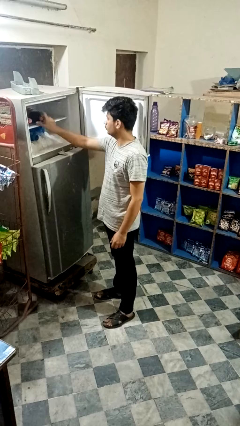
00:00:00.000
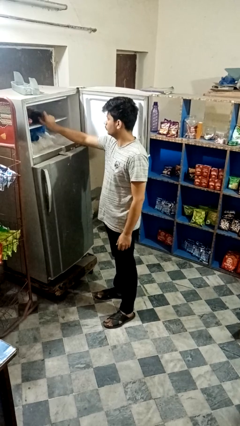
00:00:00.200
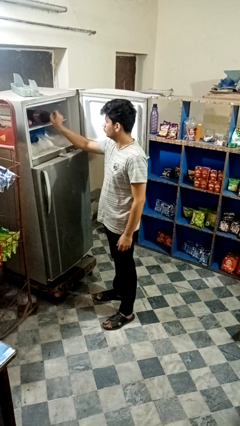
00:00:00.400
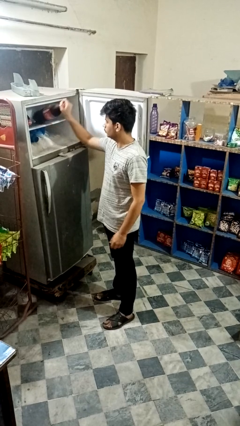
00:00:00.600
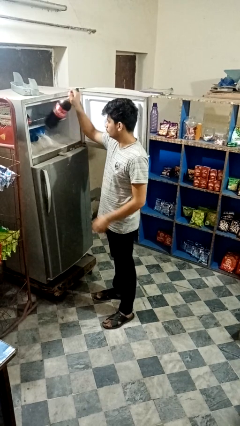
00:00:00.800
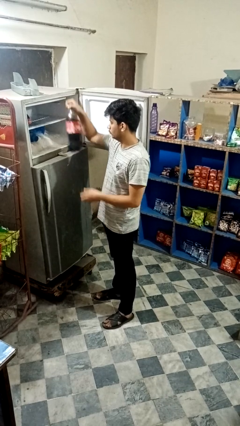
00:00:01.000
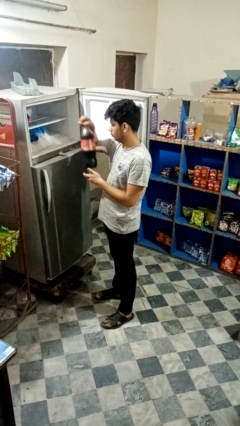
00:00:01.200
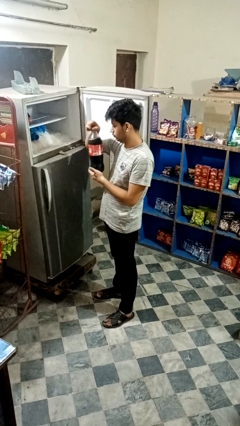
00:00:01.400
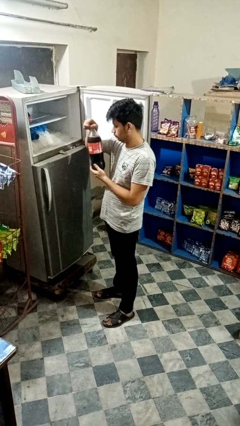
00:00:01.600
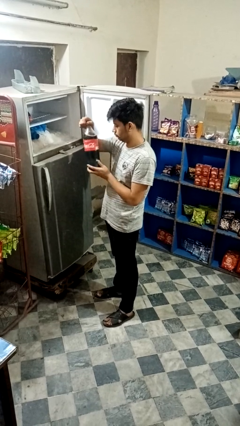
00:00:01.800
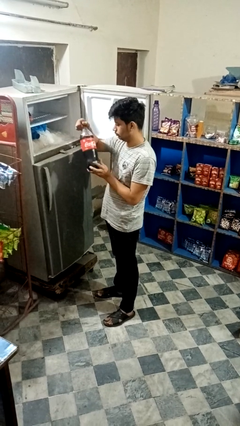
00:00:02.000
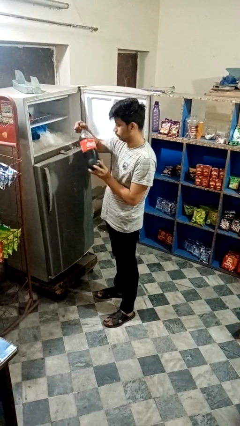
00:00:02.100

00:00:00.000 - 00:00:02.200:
person takes object from refrigerator

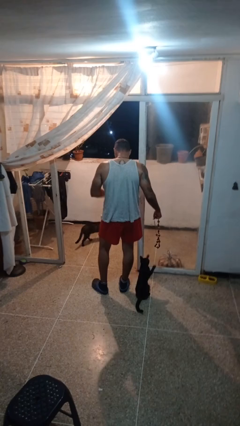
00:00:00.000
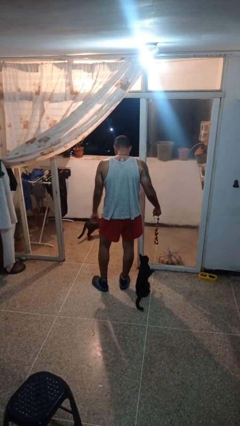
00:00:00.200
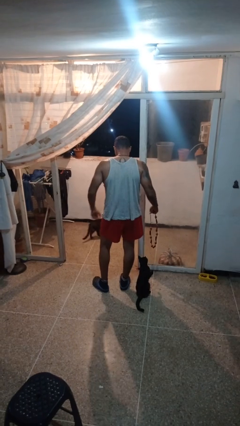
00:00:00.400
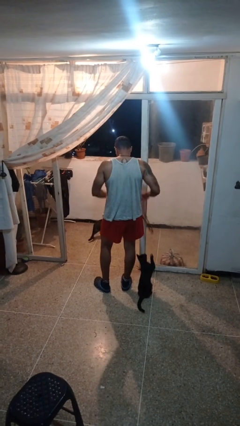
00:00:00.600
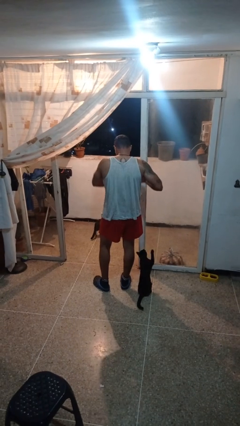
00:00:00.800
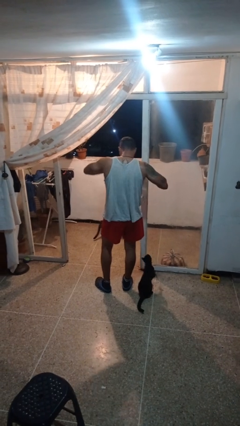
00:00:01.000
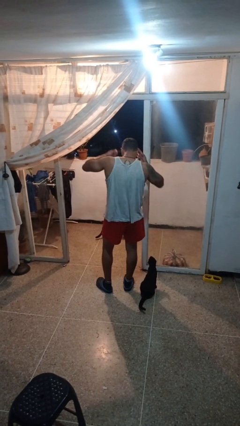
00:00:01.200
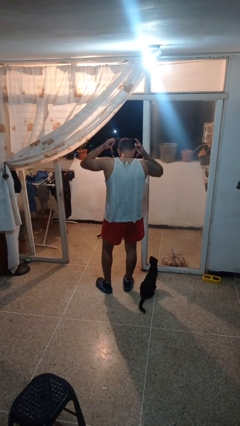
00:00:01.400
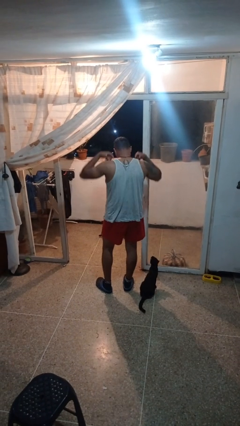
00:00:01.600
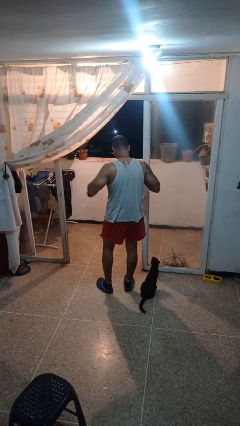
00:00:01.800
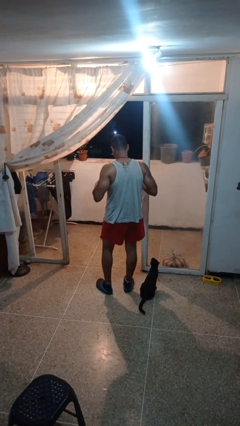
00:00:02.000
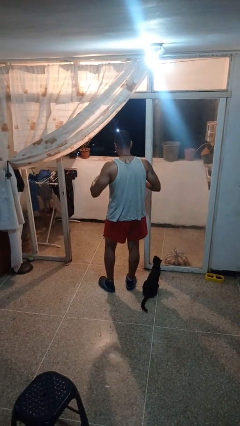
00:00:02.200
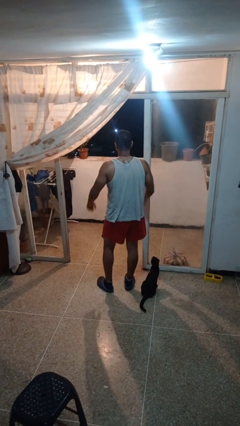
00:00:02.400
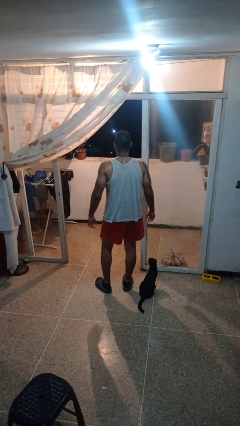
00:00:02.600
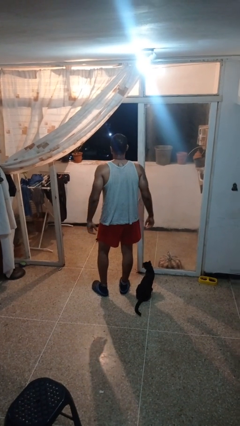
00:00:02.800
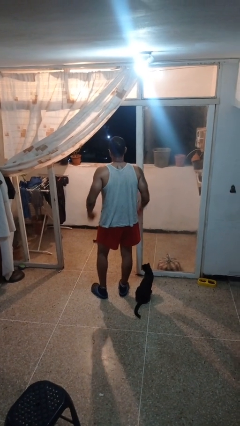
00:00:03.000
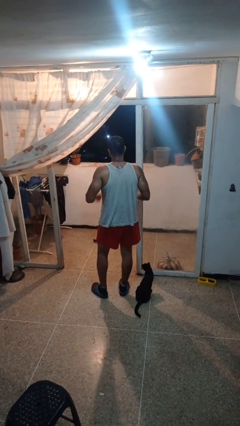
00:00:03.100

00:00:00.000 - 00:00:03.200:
person puts on necklace

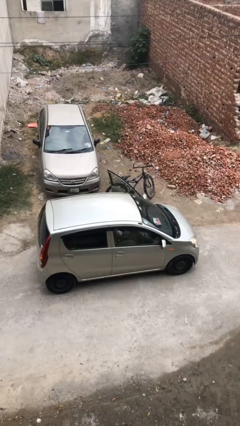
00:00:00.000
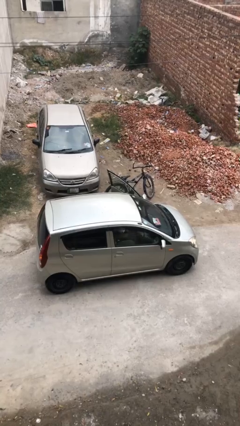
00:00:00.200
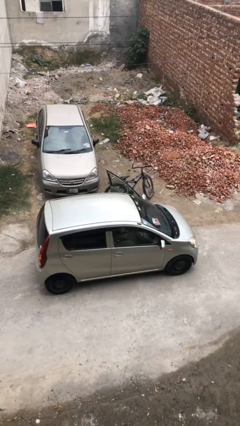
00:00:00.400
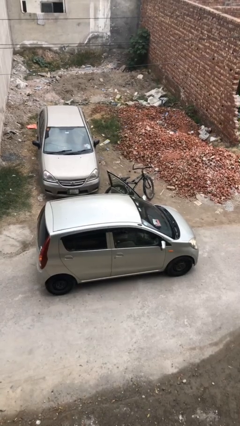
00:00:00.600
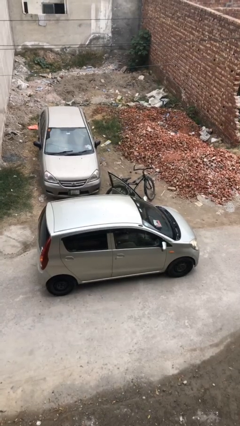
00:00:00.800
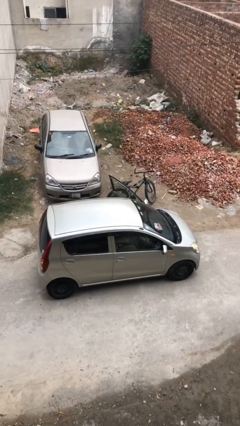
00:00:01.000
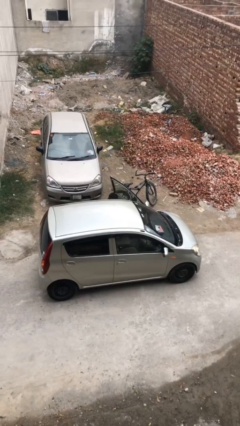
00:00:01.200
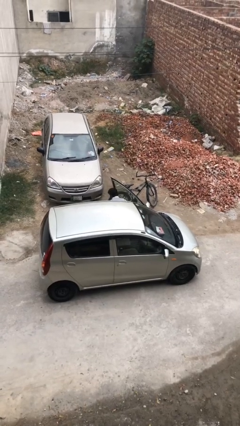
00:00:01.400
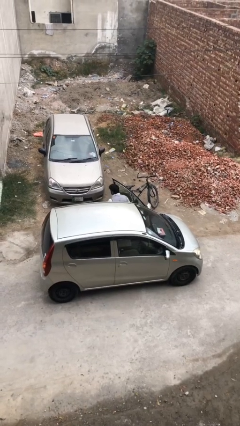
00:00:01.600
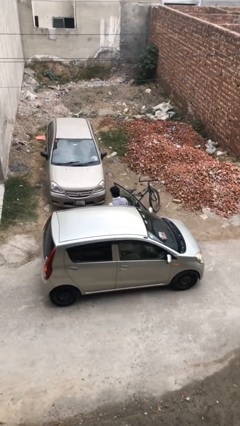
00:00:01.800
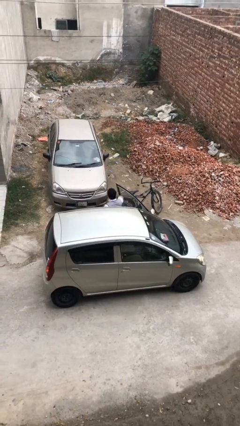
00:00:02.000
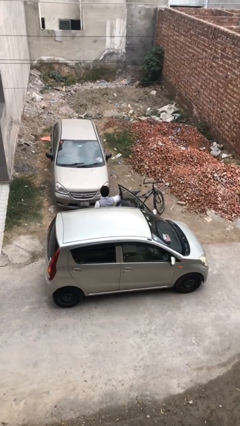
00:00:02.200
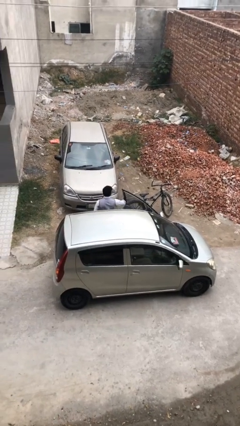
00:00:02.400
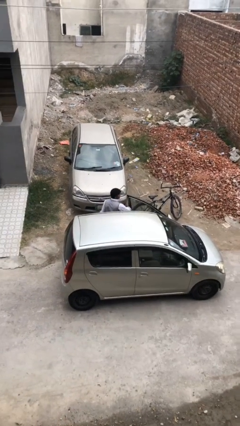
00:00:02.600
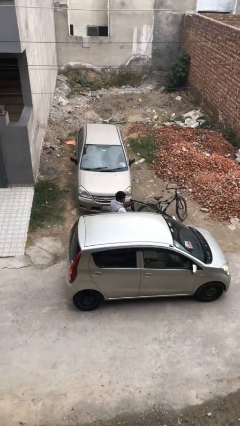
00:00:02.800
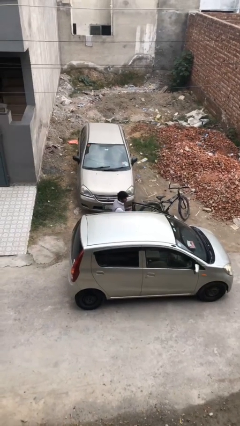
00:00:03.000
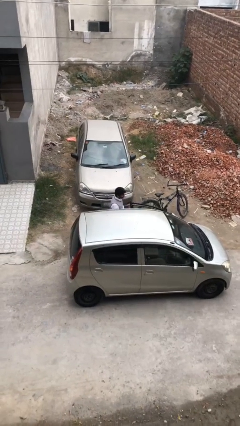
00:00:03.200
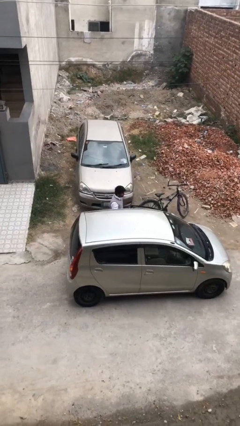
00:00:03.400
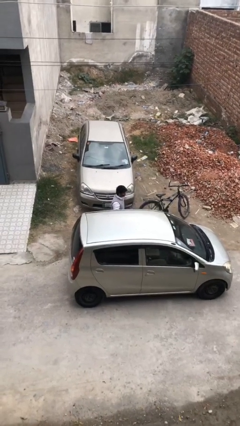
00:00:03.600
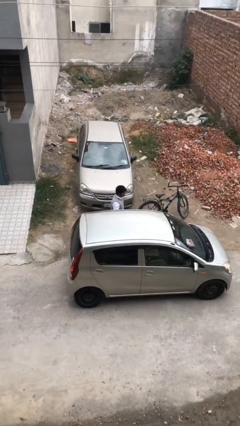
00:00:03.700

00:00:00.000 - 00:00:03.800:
person exits car

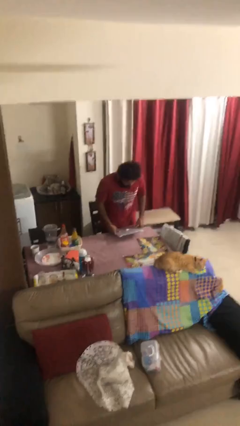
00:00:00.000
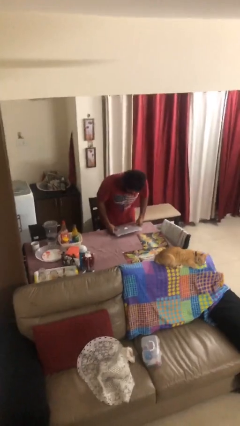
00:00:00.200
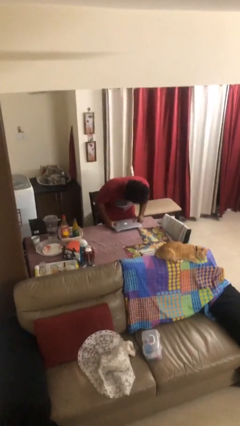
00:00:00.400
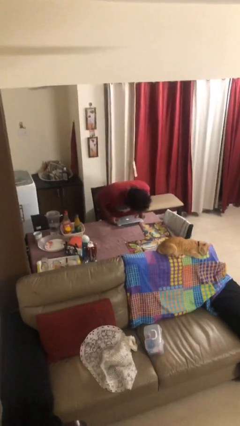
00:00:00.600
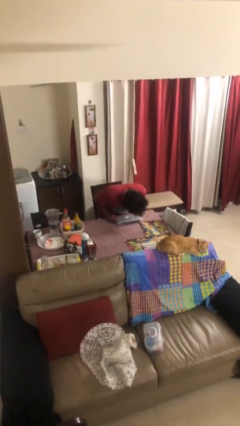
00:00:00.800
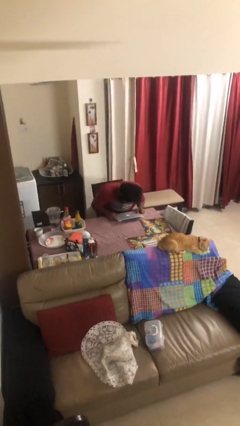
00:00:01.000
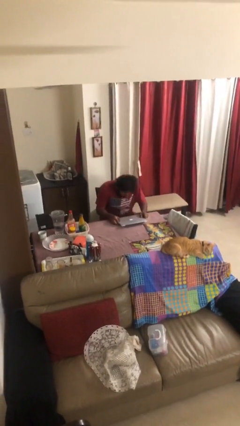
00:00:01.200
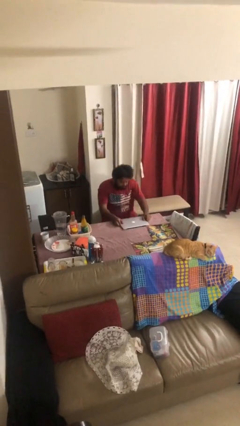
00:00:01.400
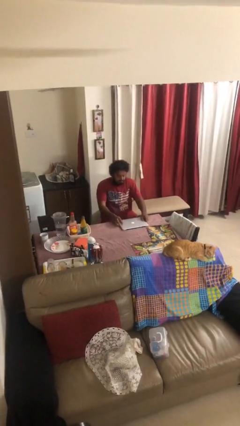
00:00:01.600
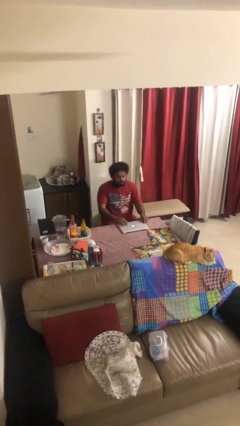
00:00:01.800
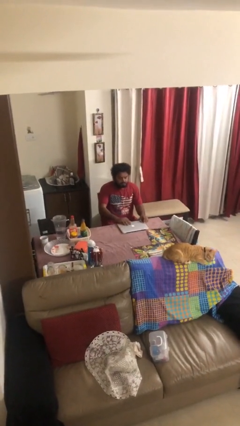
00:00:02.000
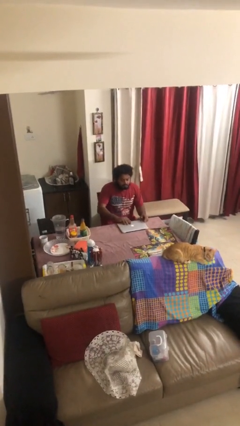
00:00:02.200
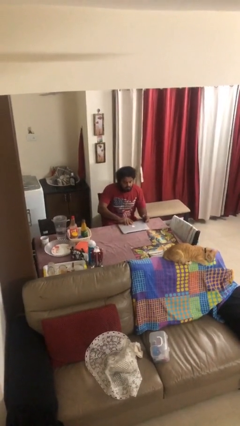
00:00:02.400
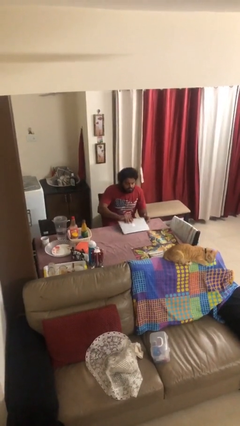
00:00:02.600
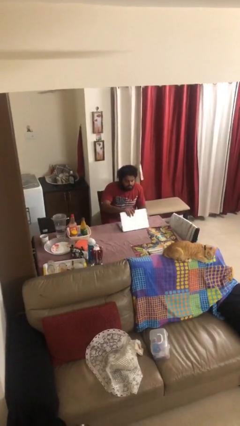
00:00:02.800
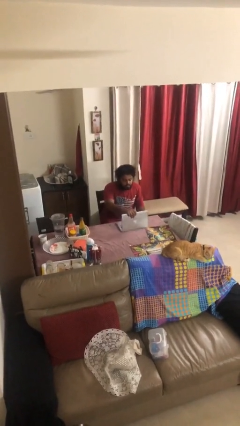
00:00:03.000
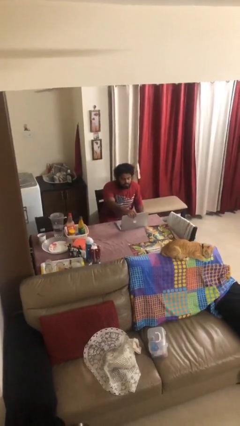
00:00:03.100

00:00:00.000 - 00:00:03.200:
person sits down

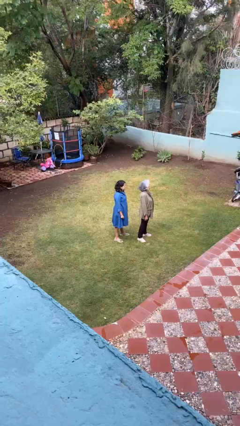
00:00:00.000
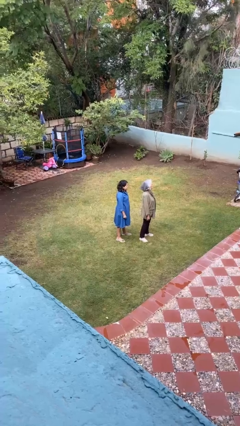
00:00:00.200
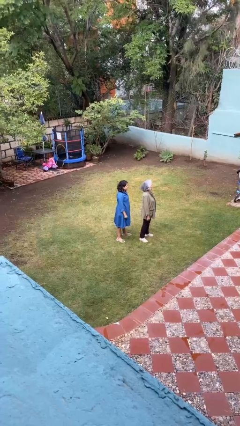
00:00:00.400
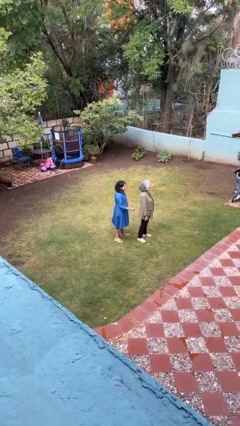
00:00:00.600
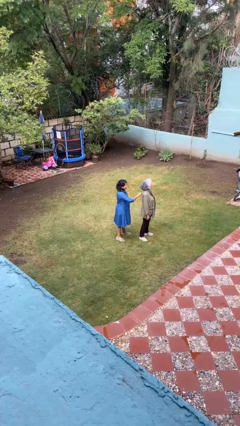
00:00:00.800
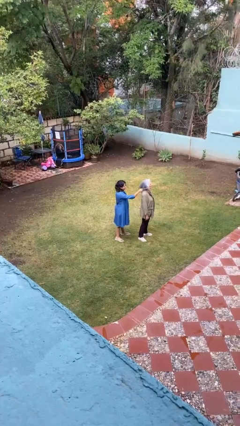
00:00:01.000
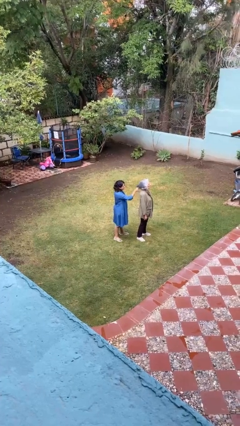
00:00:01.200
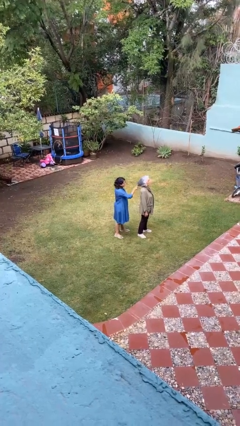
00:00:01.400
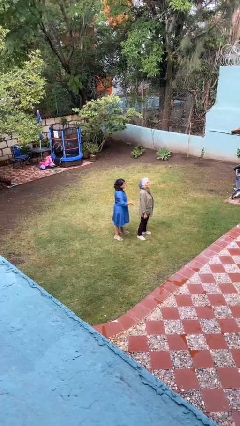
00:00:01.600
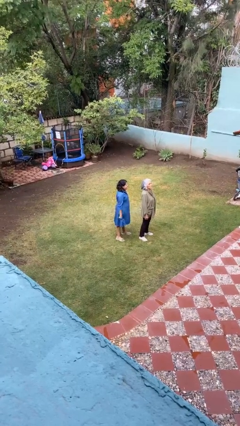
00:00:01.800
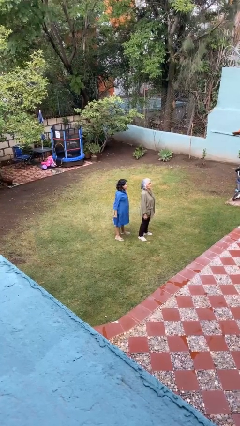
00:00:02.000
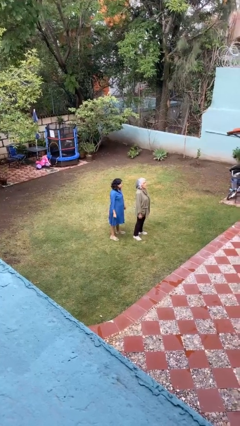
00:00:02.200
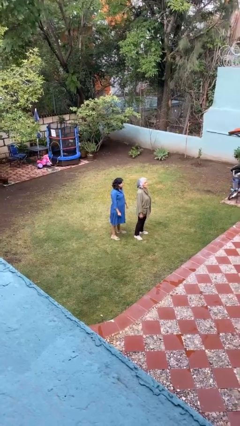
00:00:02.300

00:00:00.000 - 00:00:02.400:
person grabs person by hair

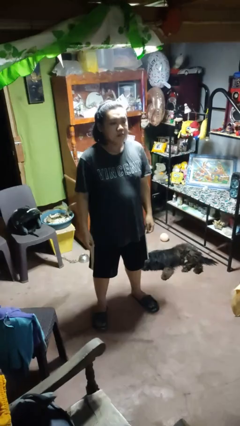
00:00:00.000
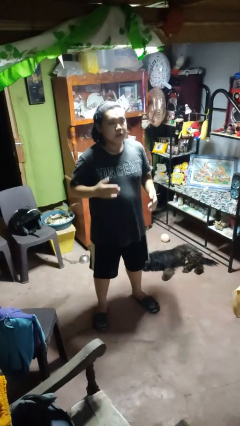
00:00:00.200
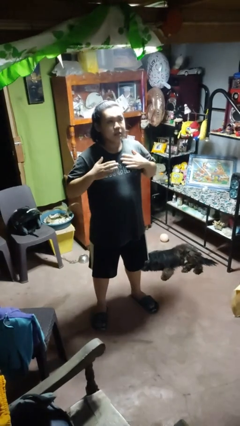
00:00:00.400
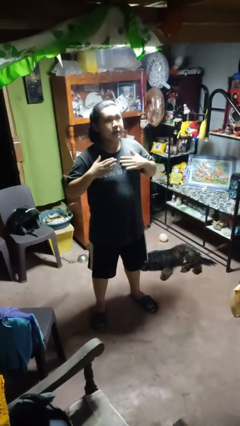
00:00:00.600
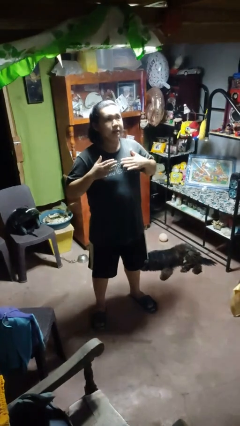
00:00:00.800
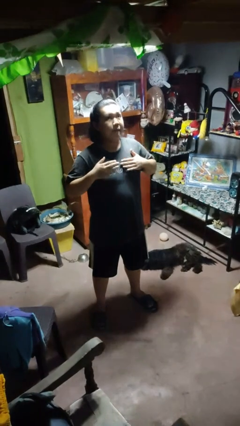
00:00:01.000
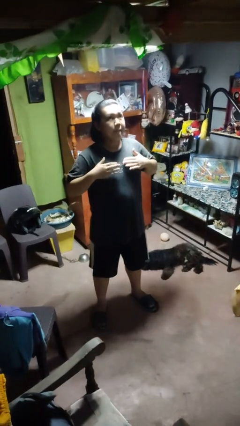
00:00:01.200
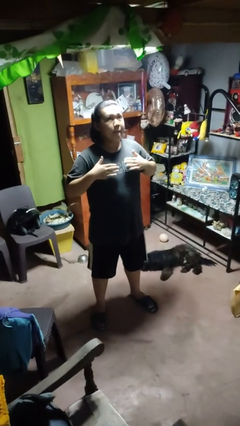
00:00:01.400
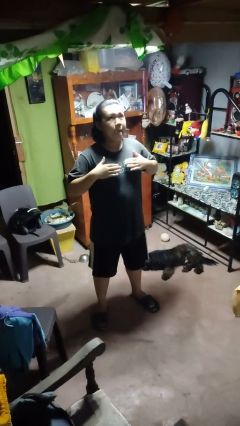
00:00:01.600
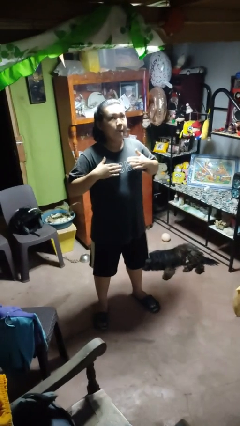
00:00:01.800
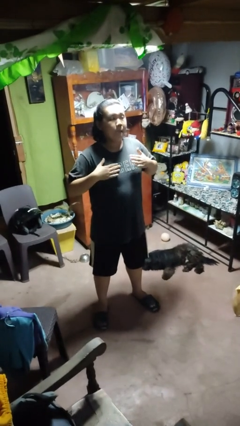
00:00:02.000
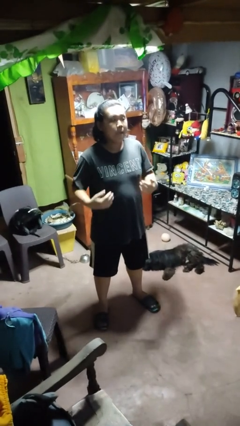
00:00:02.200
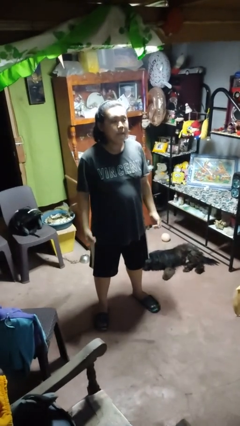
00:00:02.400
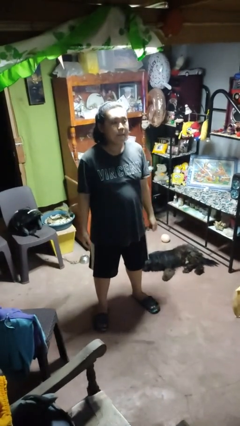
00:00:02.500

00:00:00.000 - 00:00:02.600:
person drums on chest
